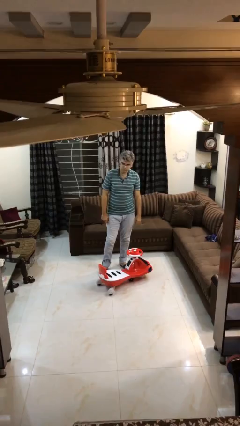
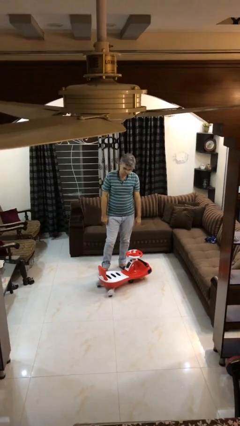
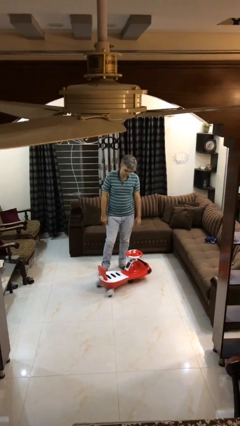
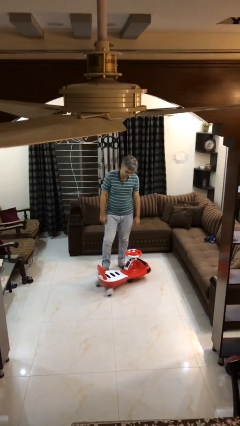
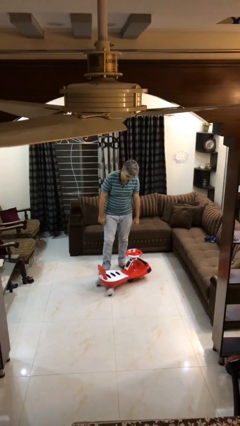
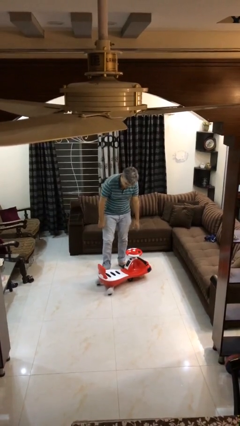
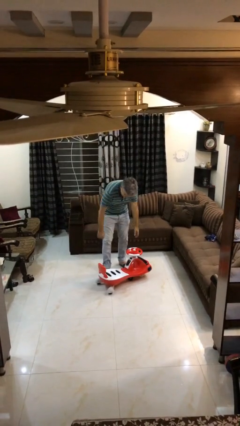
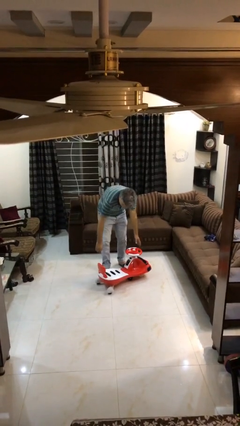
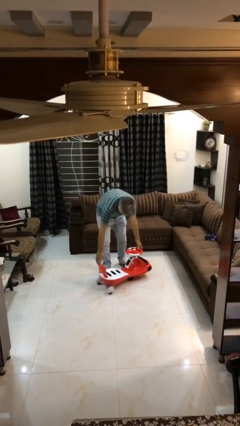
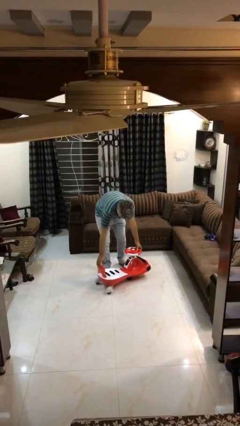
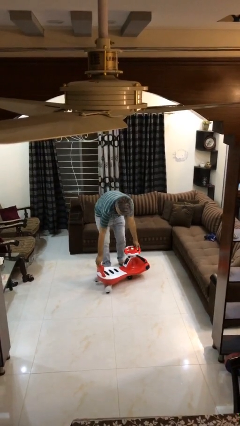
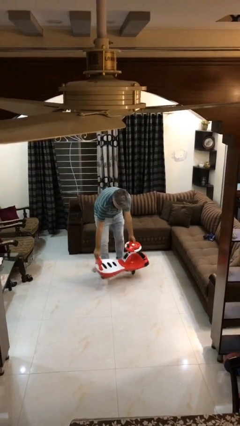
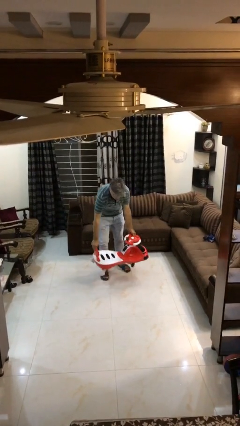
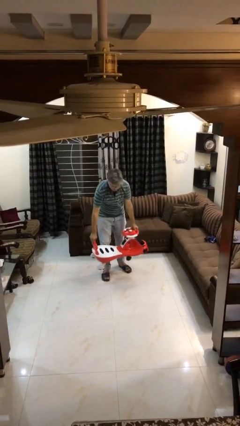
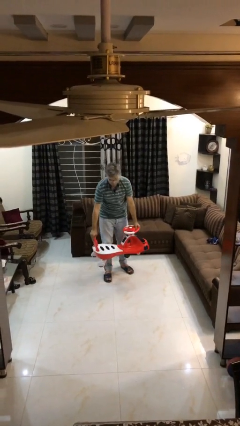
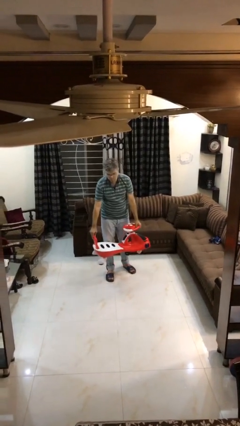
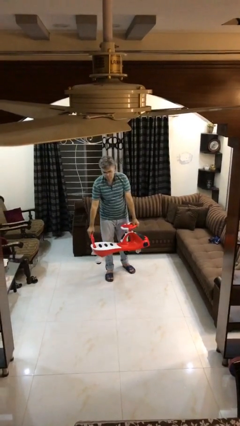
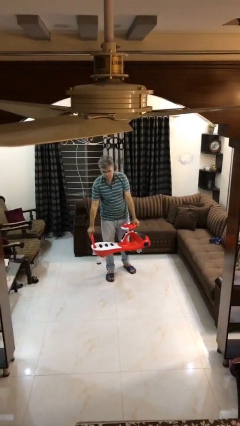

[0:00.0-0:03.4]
person picks up object from floor

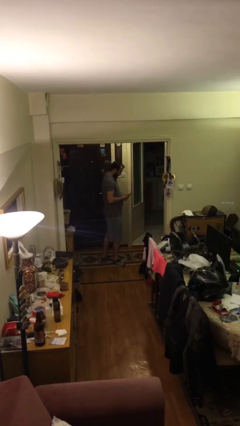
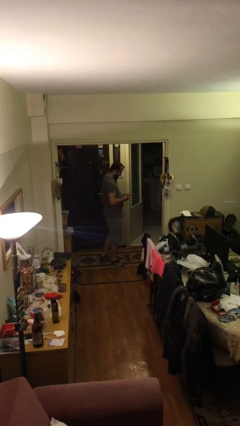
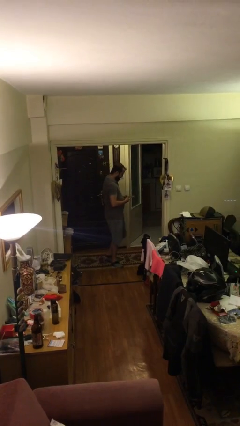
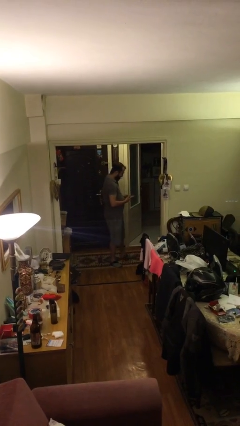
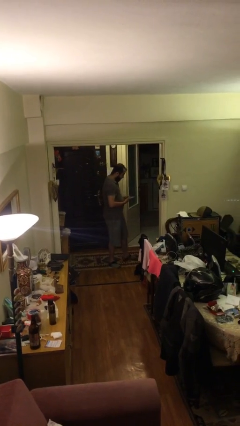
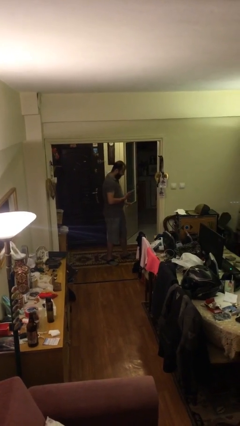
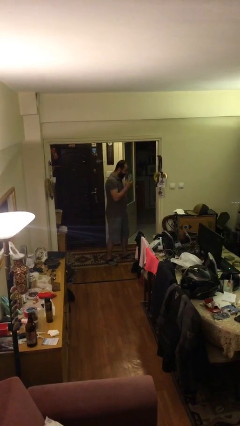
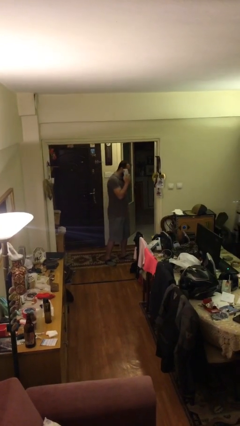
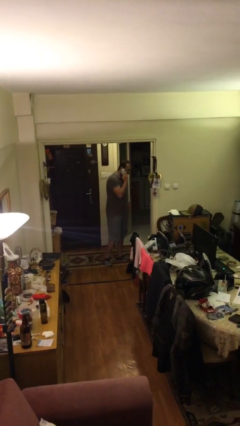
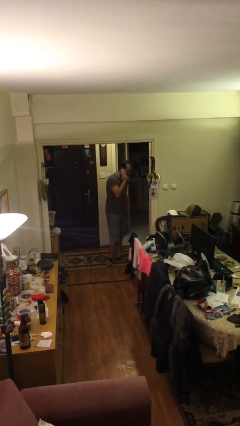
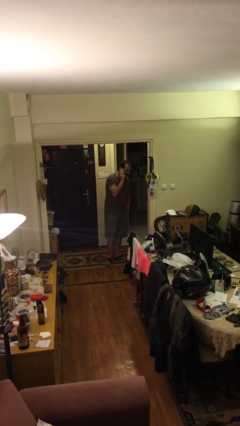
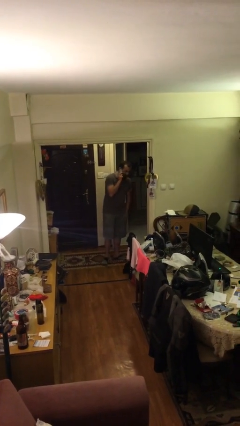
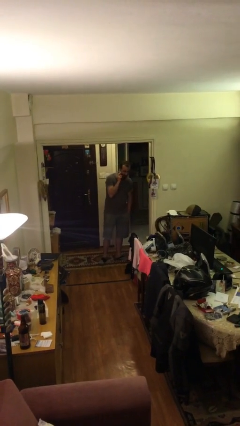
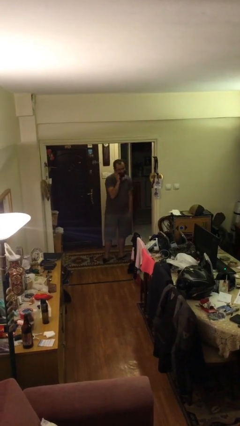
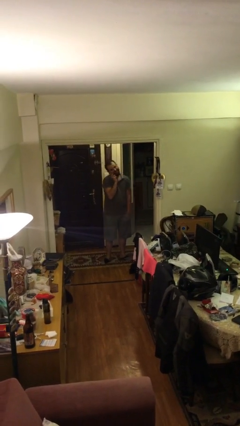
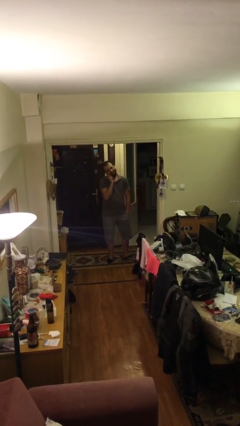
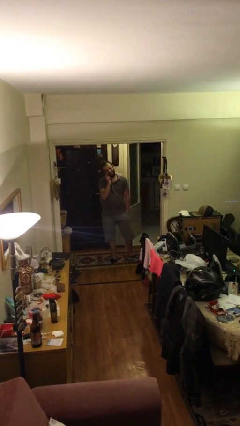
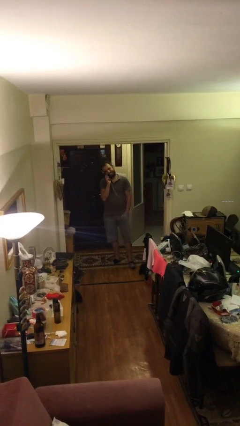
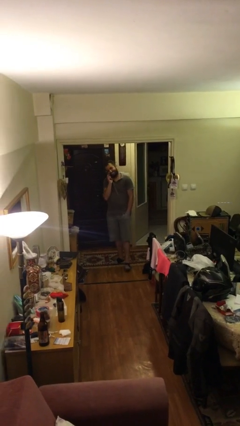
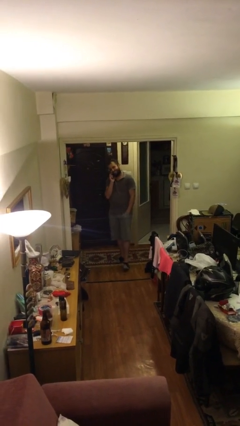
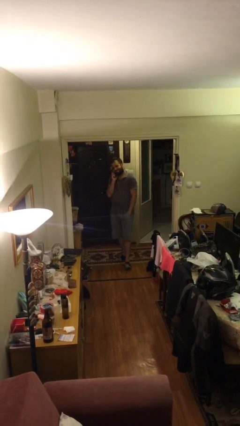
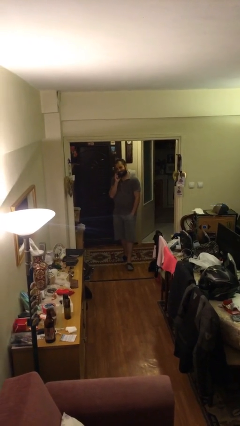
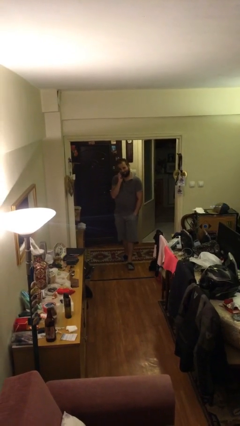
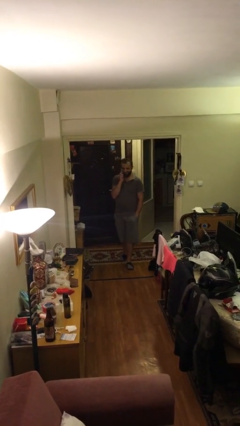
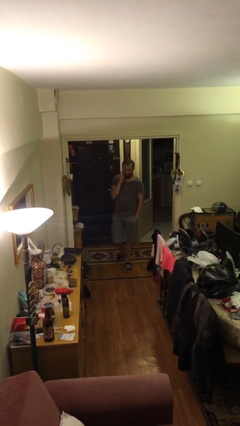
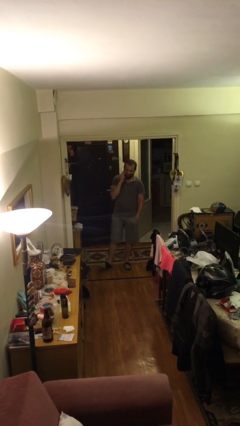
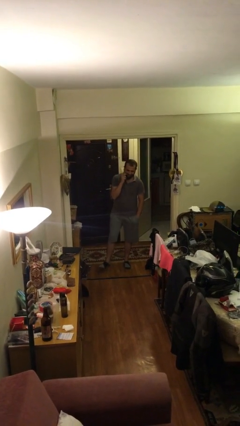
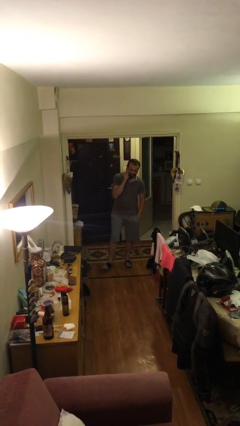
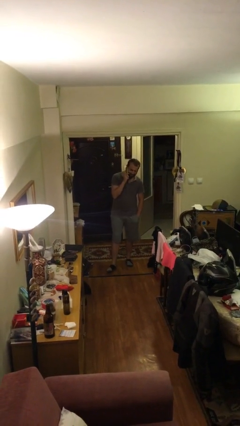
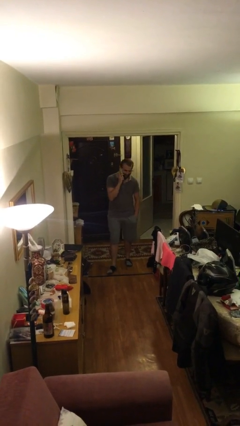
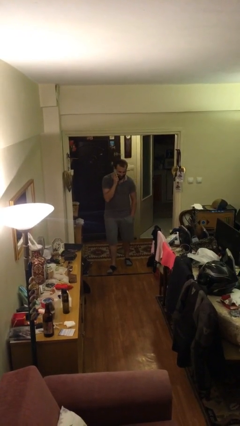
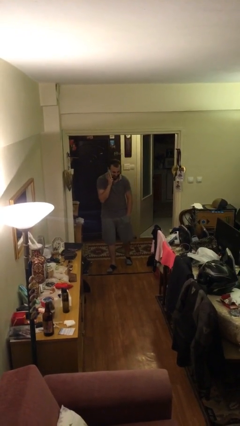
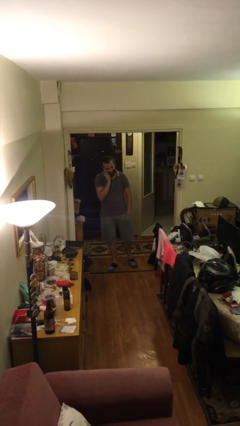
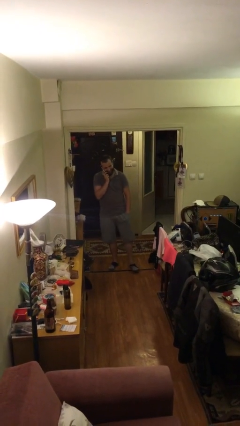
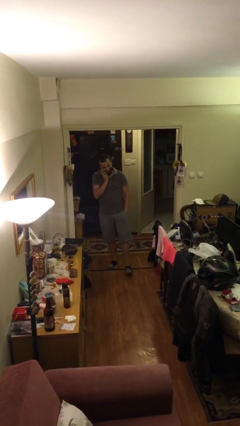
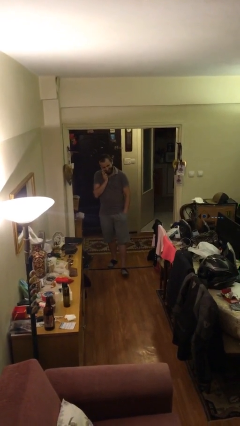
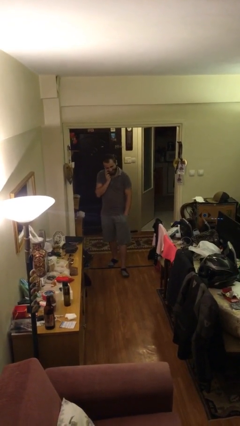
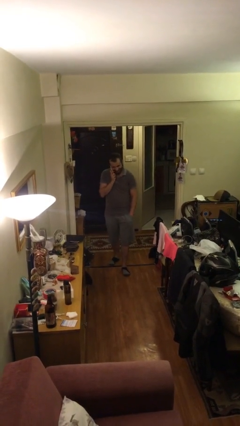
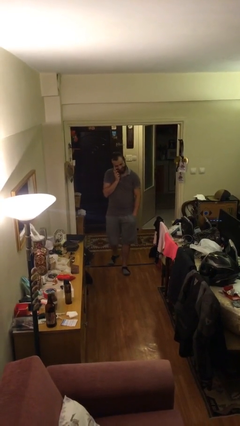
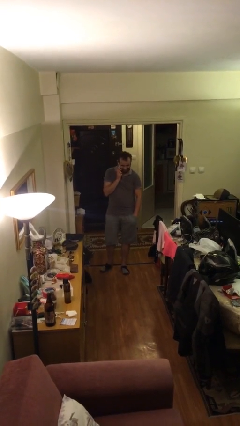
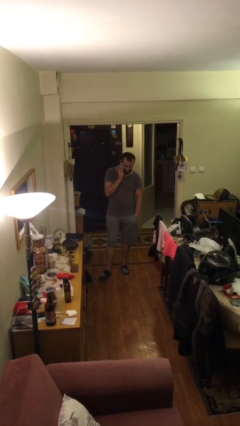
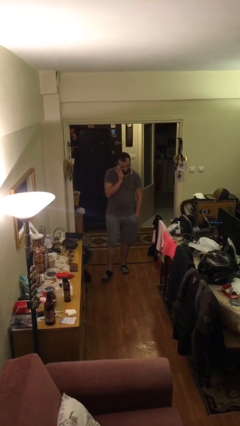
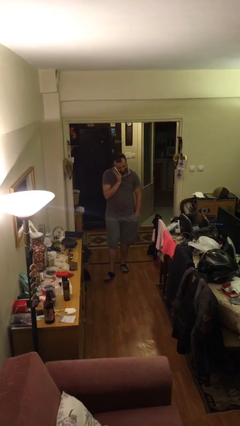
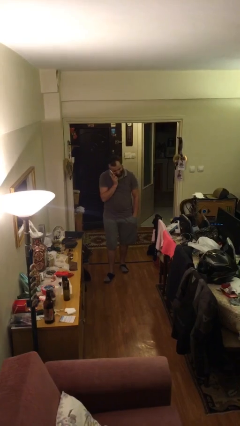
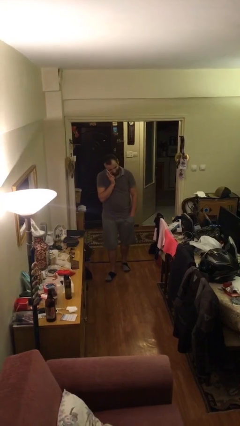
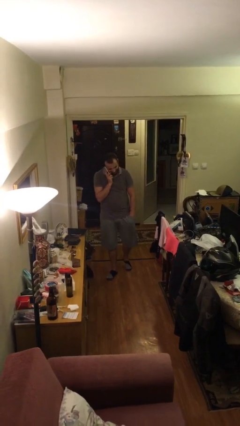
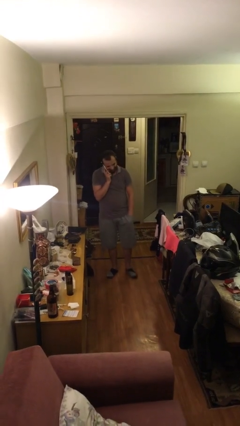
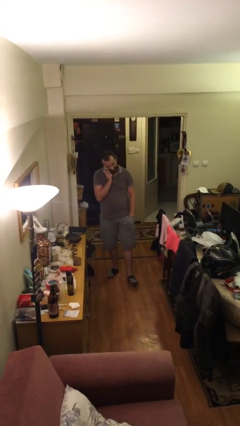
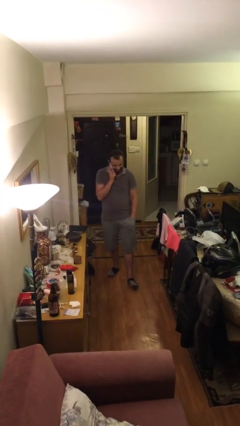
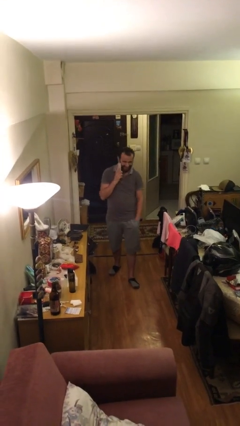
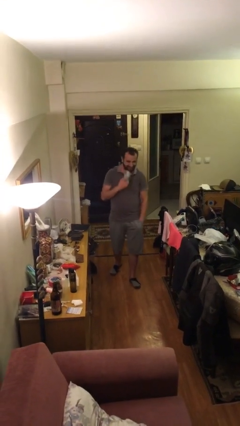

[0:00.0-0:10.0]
person talks on phone

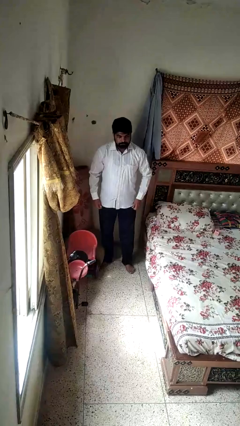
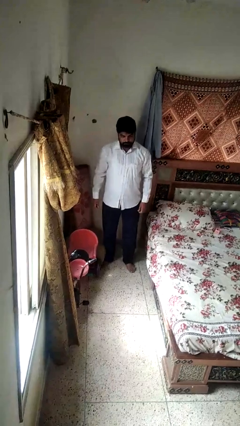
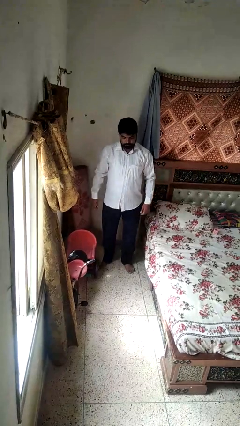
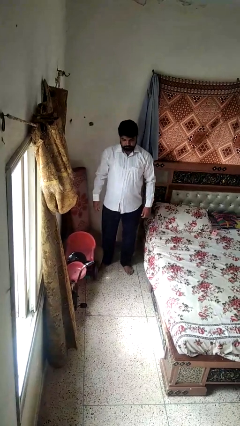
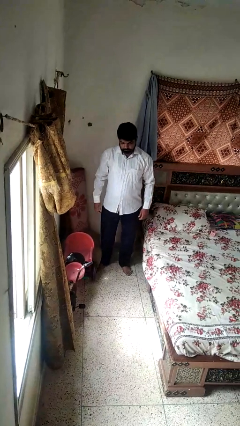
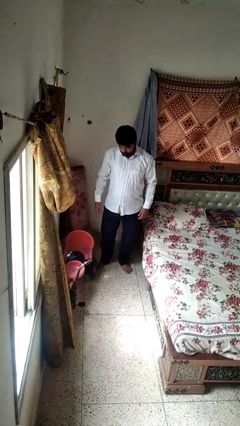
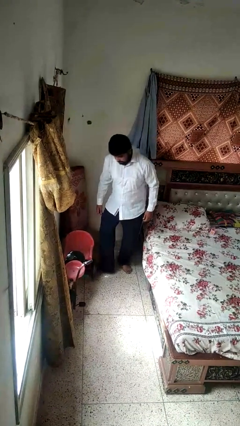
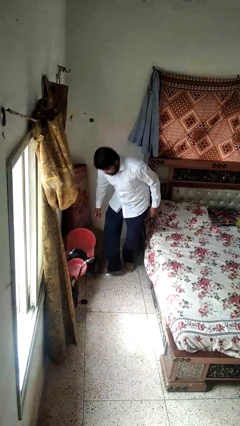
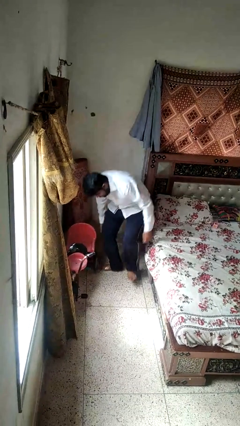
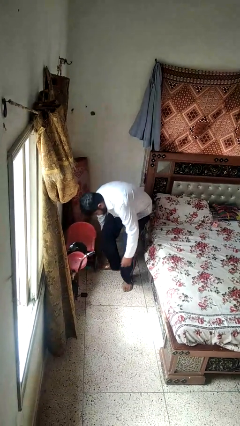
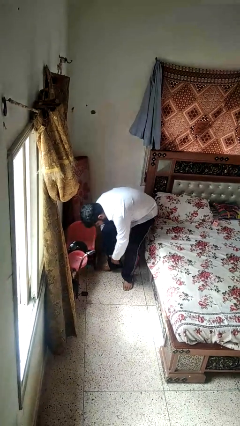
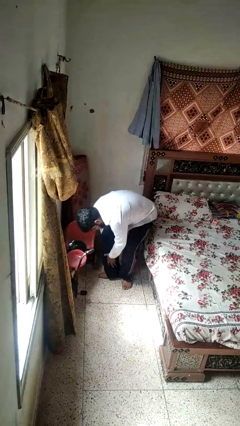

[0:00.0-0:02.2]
person trips on object on floor

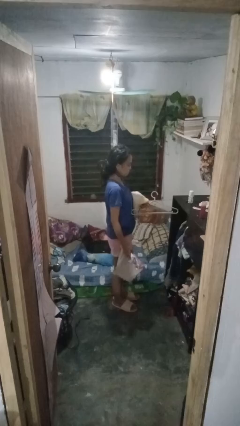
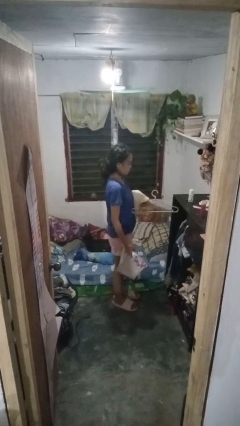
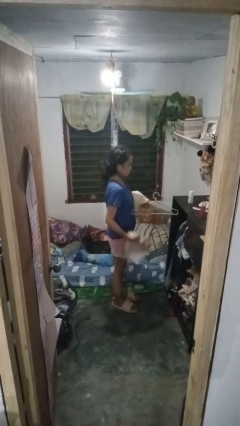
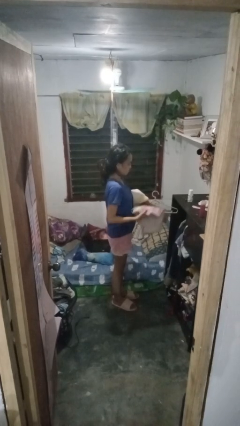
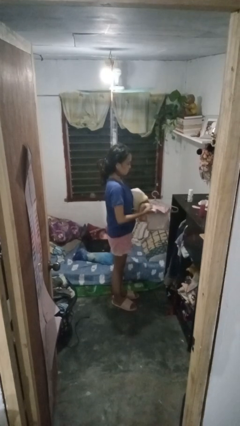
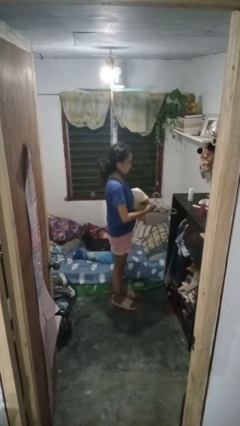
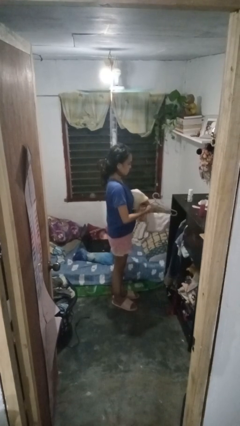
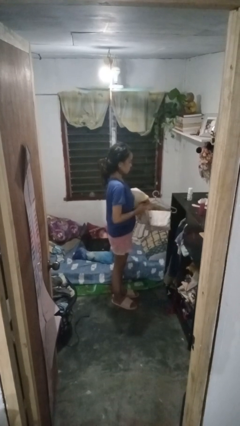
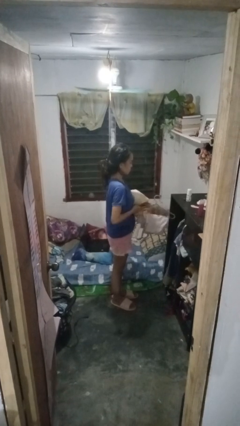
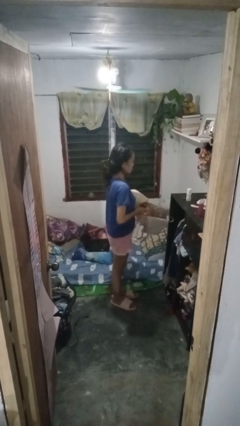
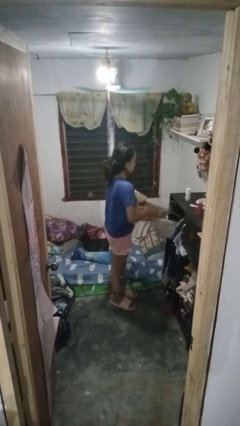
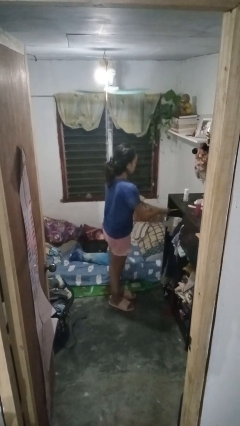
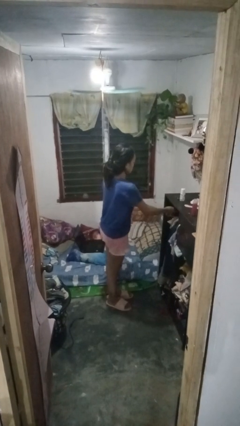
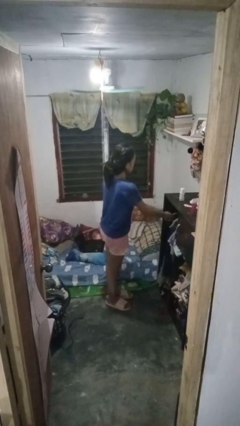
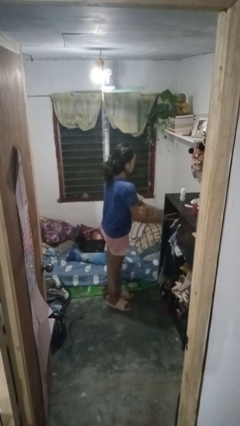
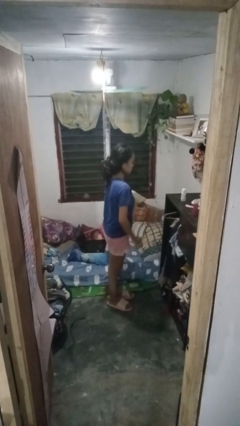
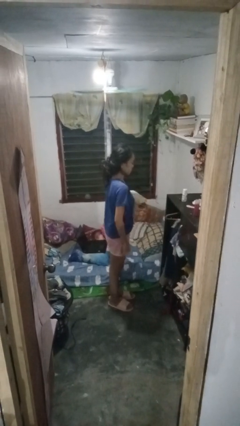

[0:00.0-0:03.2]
person puts clothes into closet
